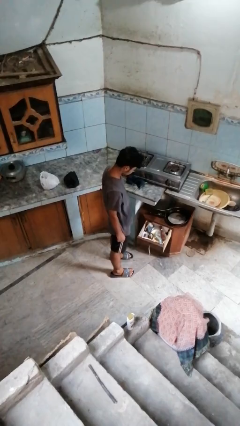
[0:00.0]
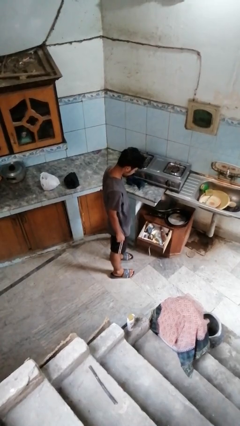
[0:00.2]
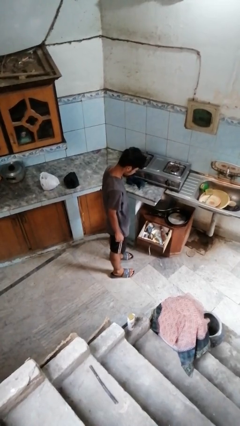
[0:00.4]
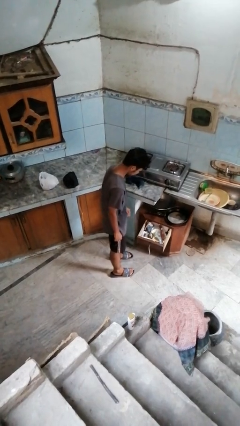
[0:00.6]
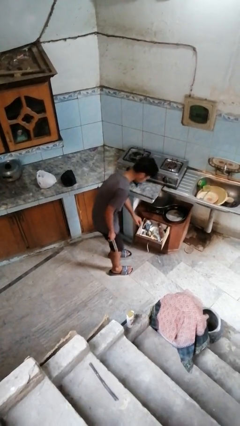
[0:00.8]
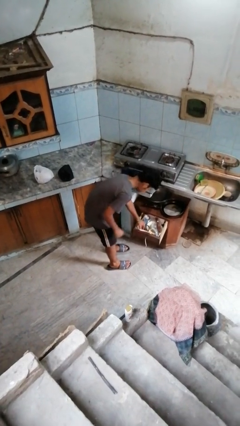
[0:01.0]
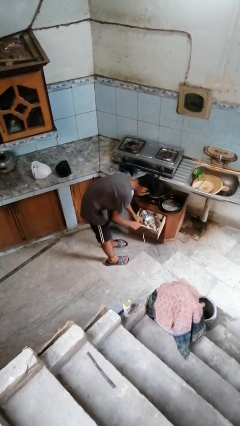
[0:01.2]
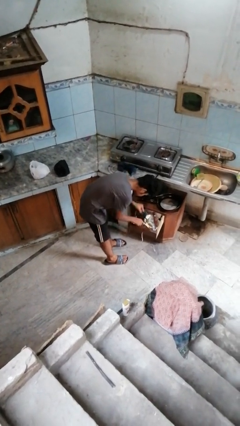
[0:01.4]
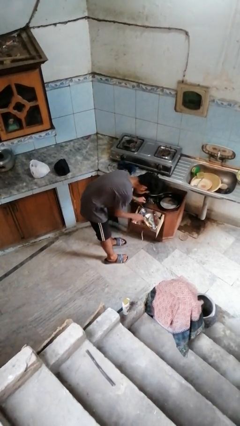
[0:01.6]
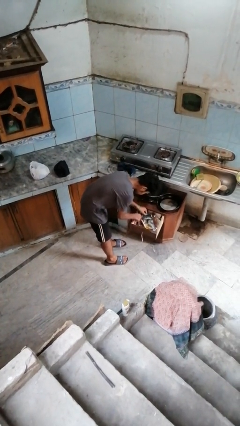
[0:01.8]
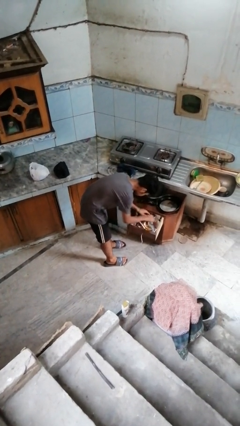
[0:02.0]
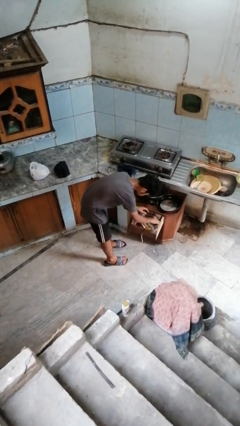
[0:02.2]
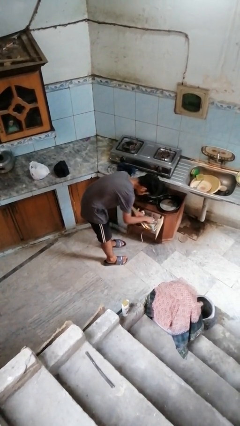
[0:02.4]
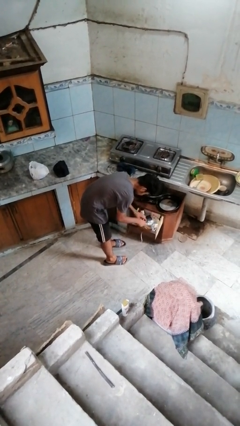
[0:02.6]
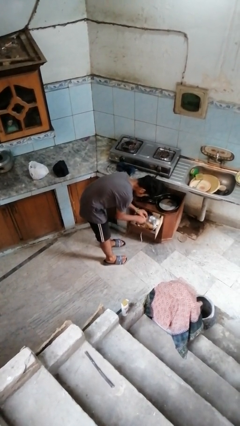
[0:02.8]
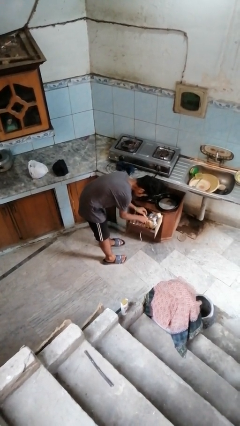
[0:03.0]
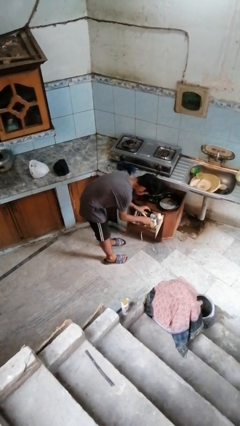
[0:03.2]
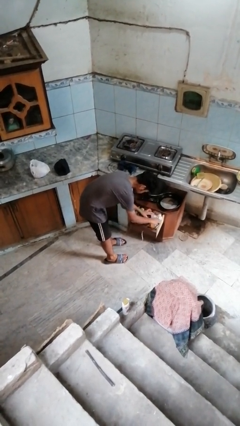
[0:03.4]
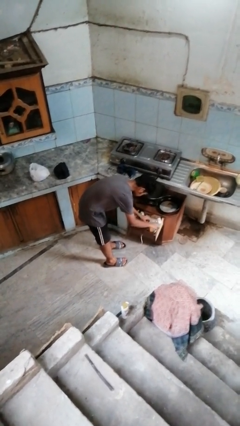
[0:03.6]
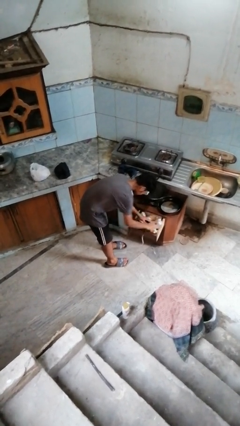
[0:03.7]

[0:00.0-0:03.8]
person searches in kitchen drawer

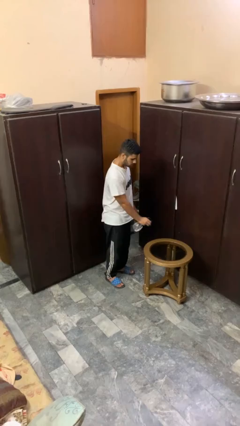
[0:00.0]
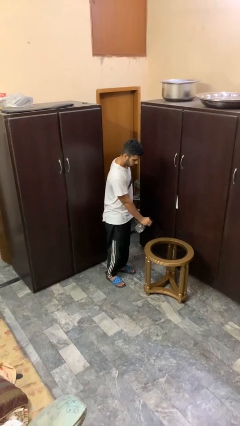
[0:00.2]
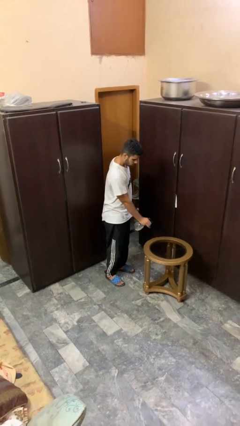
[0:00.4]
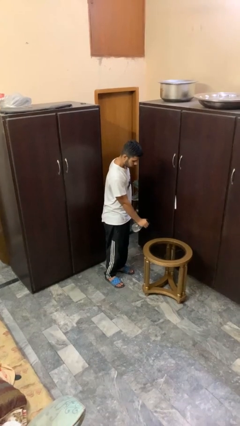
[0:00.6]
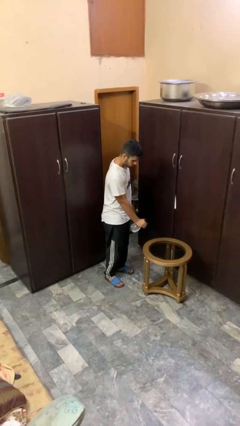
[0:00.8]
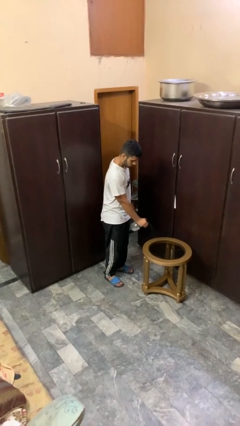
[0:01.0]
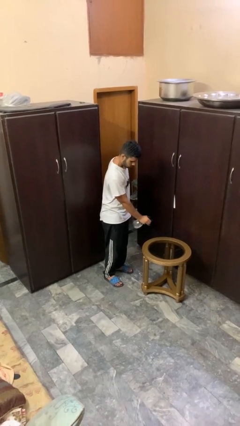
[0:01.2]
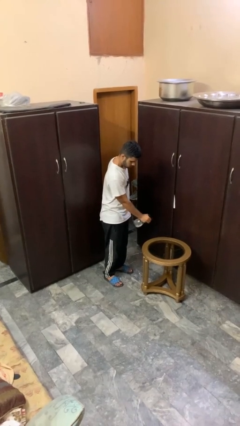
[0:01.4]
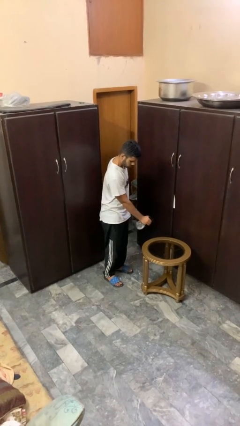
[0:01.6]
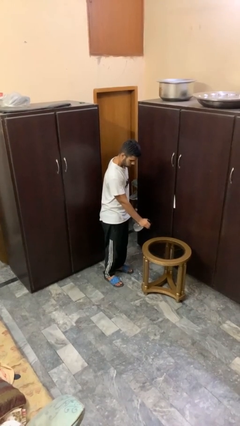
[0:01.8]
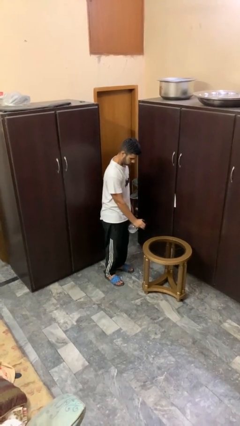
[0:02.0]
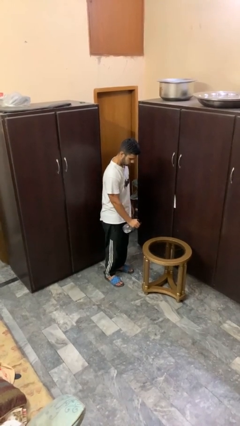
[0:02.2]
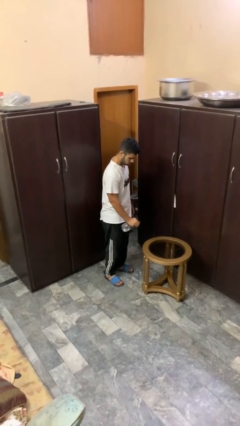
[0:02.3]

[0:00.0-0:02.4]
person sprays from bottle

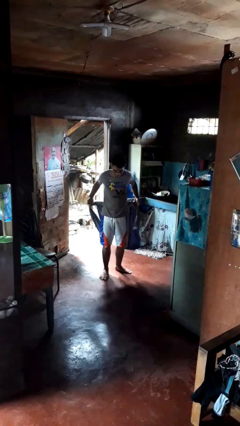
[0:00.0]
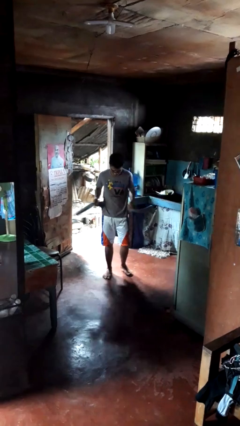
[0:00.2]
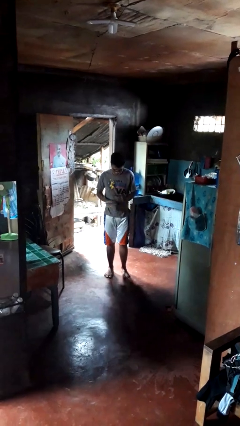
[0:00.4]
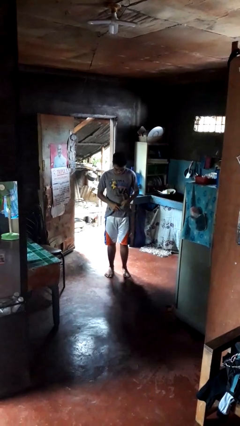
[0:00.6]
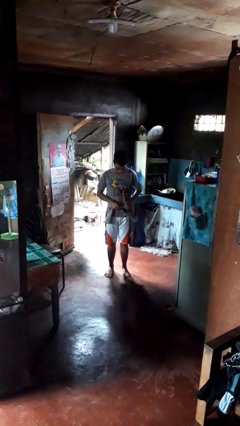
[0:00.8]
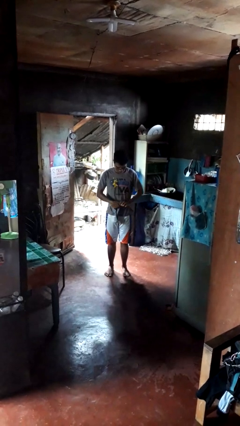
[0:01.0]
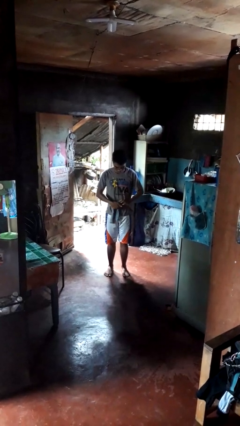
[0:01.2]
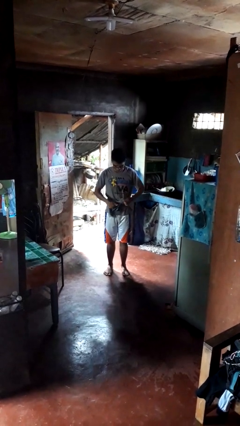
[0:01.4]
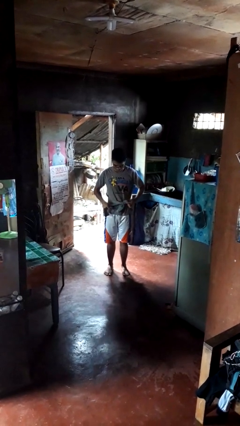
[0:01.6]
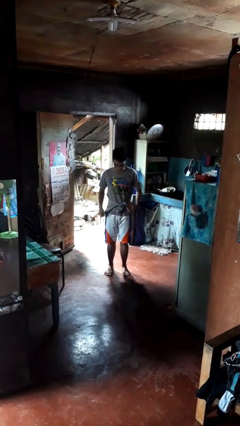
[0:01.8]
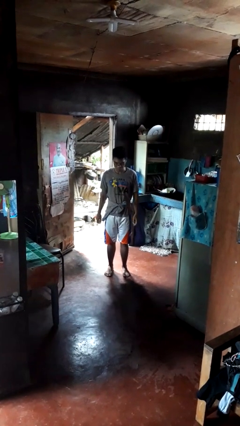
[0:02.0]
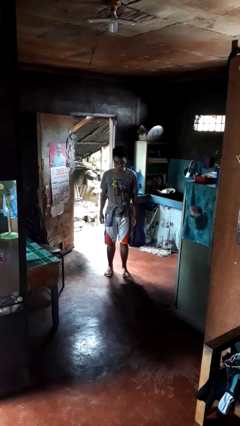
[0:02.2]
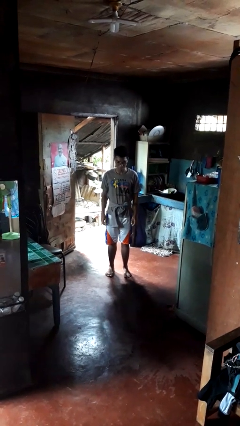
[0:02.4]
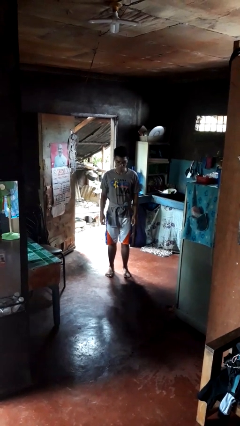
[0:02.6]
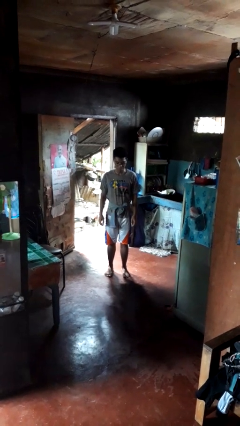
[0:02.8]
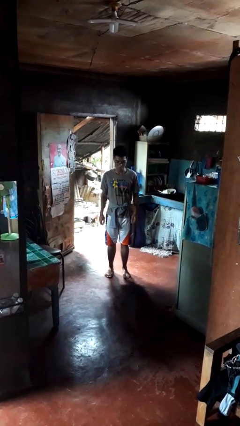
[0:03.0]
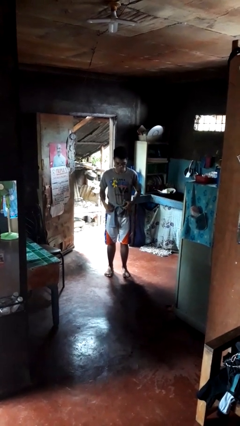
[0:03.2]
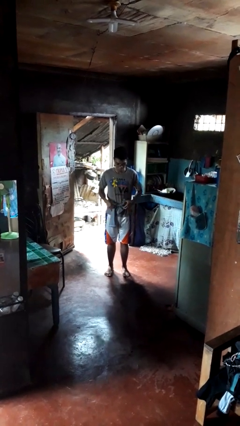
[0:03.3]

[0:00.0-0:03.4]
person ties jacket around waist

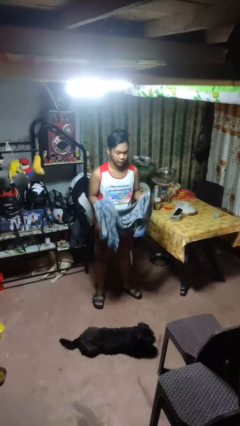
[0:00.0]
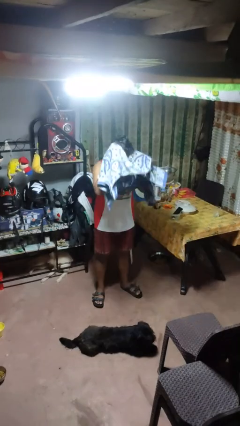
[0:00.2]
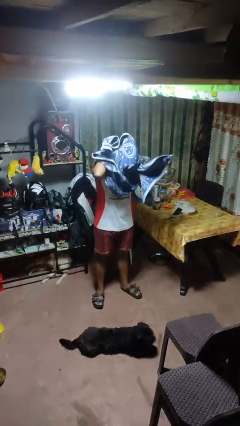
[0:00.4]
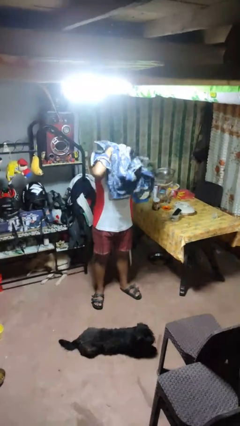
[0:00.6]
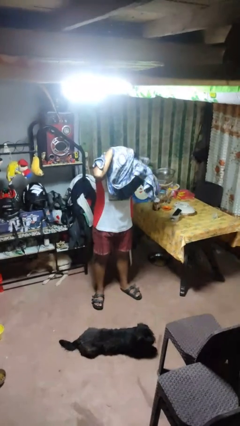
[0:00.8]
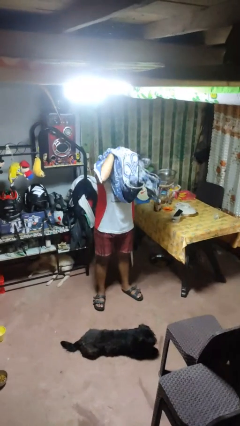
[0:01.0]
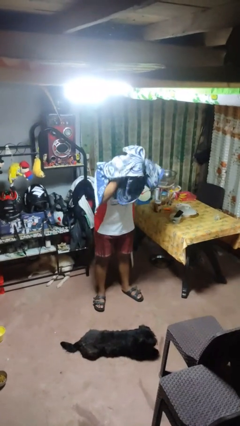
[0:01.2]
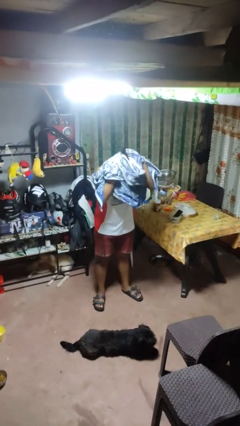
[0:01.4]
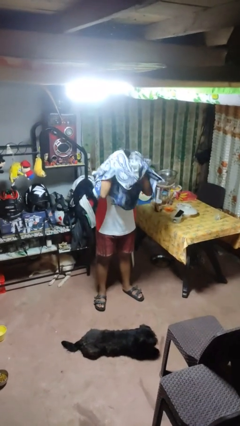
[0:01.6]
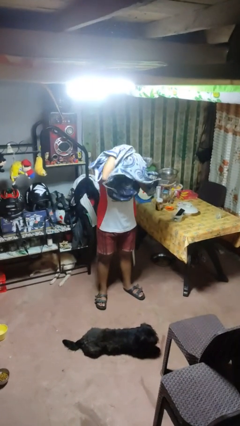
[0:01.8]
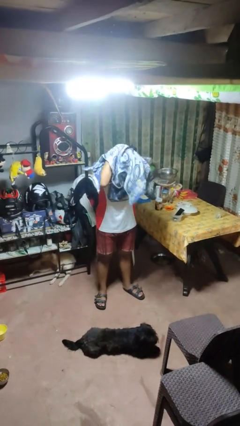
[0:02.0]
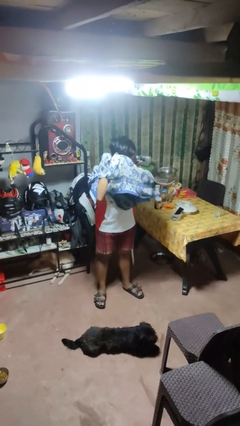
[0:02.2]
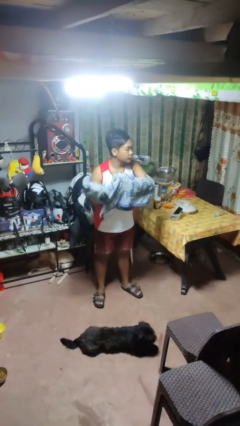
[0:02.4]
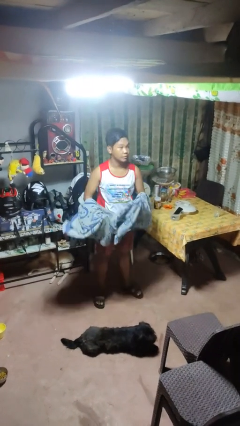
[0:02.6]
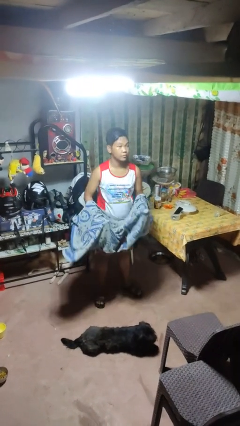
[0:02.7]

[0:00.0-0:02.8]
person dries hair with towel

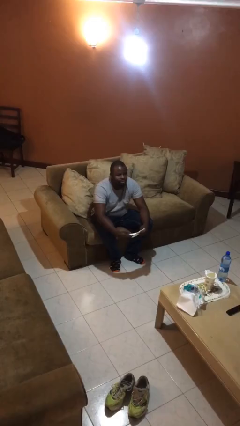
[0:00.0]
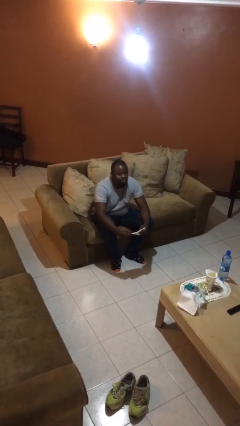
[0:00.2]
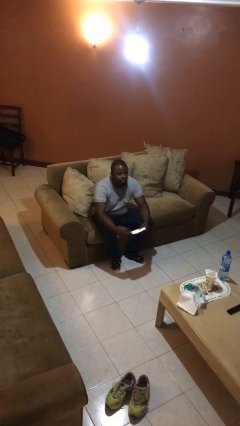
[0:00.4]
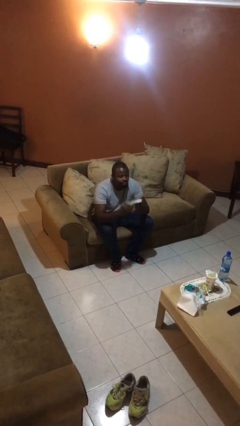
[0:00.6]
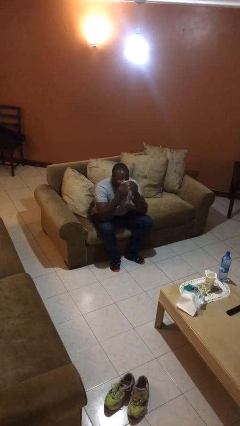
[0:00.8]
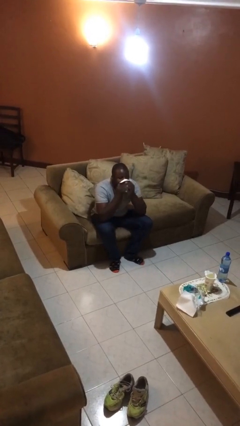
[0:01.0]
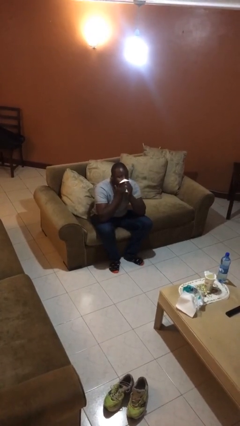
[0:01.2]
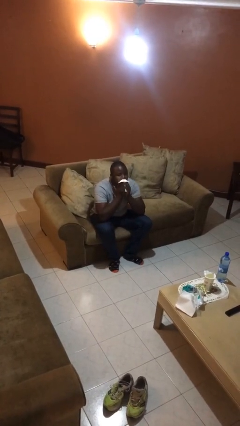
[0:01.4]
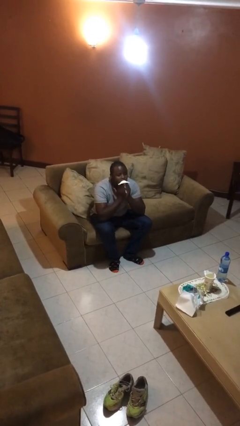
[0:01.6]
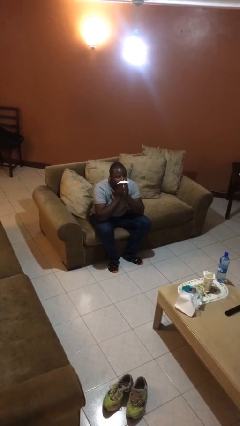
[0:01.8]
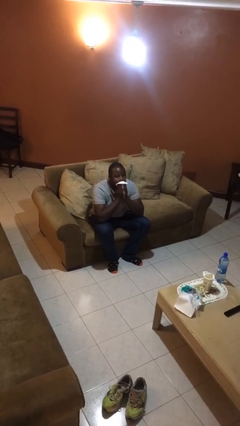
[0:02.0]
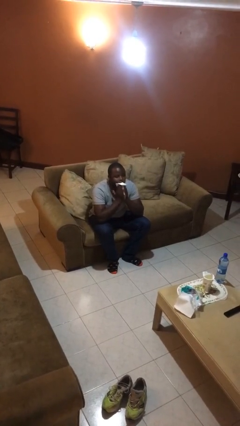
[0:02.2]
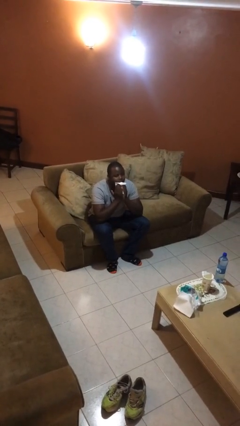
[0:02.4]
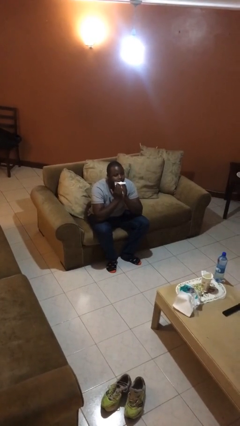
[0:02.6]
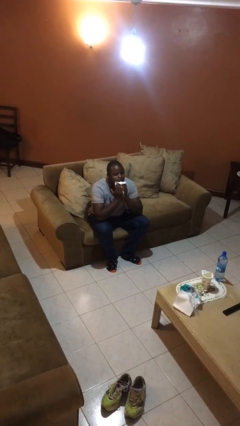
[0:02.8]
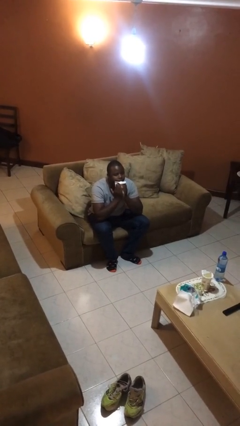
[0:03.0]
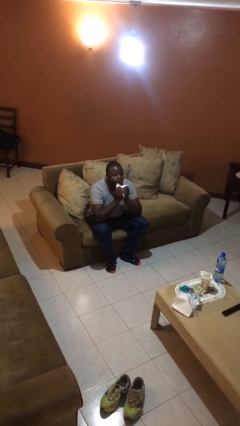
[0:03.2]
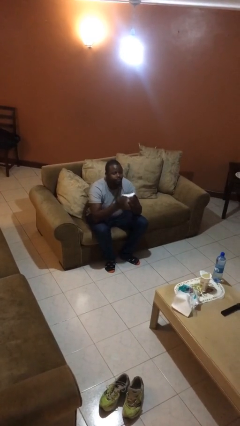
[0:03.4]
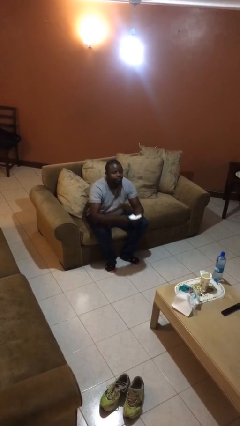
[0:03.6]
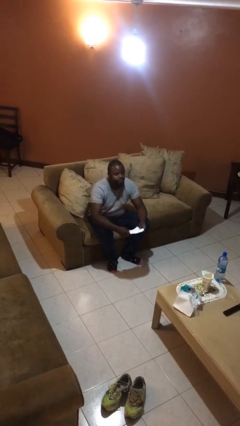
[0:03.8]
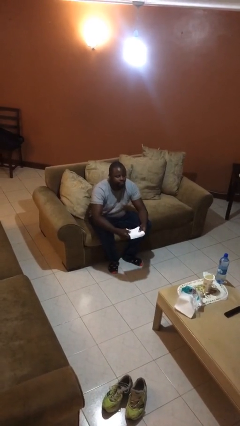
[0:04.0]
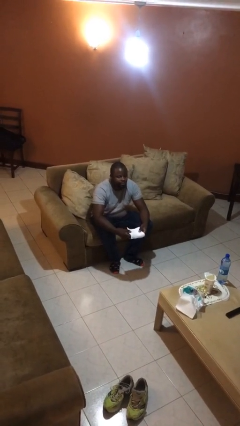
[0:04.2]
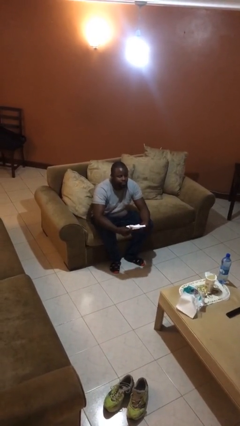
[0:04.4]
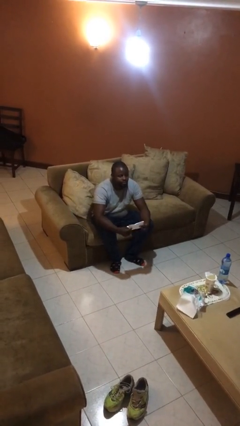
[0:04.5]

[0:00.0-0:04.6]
person wipes mouth with napkin

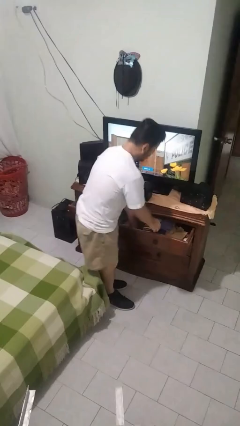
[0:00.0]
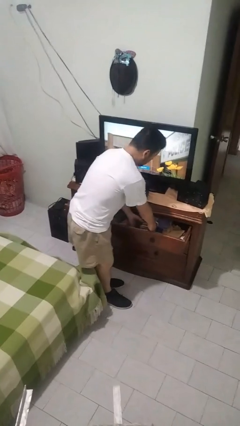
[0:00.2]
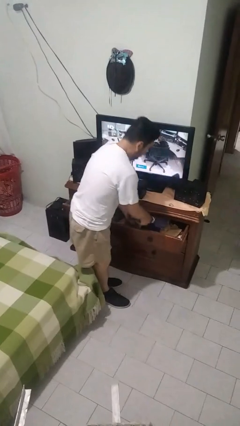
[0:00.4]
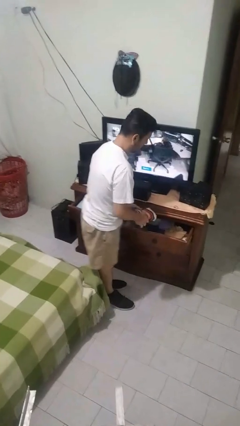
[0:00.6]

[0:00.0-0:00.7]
person takes clothes from dresser
